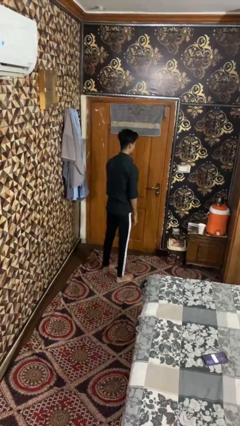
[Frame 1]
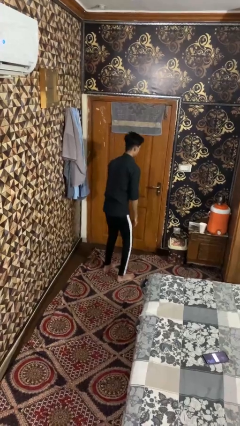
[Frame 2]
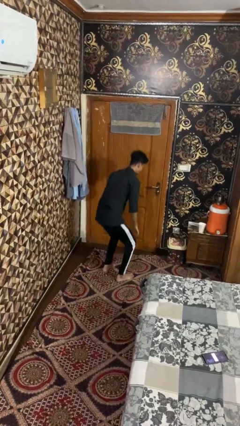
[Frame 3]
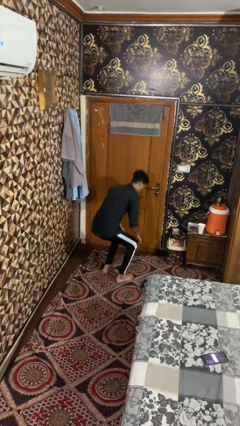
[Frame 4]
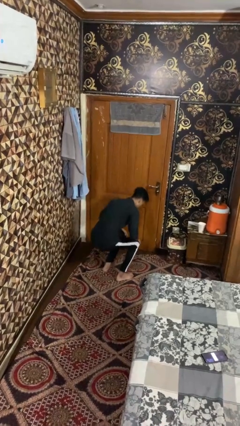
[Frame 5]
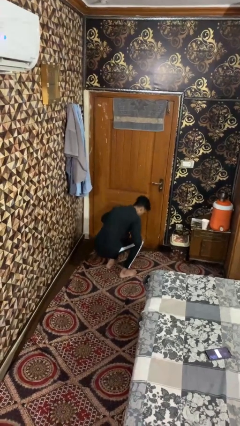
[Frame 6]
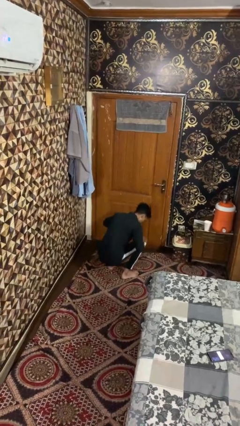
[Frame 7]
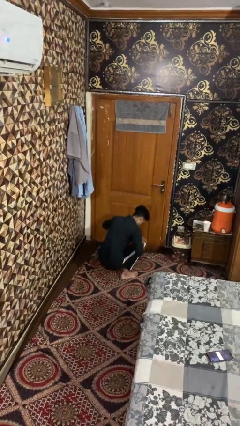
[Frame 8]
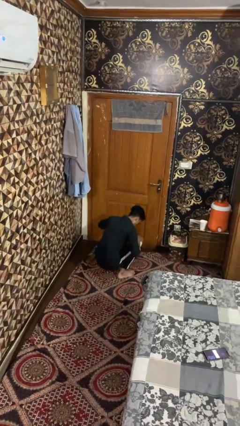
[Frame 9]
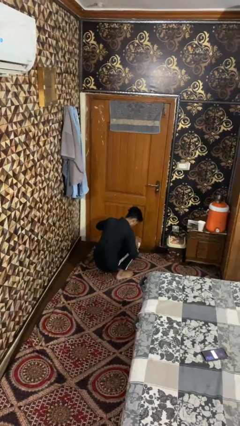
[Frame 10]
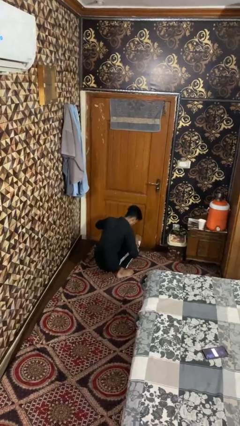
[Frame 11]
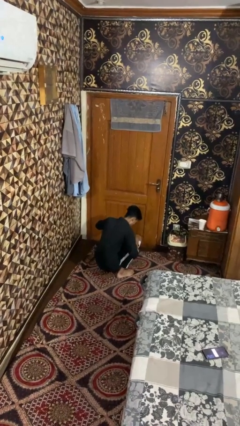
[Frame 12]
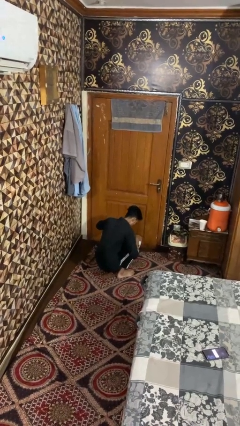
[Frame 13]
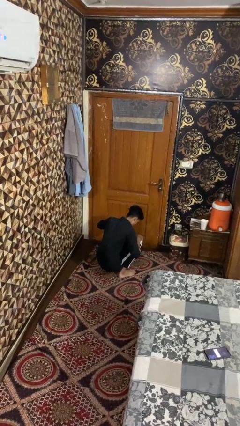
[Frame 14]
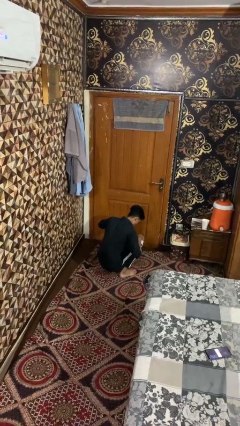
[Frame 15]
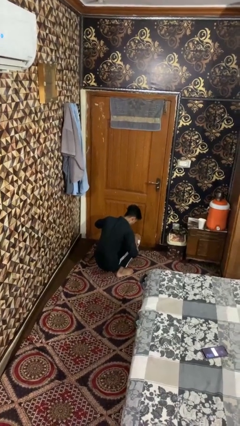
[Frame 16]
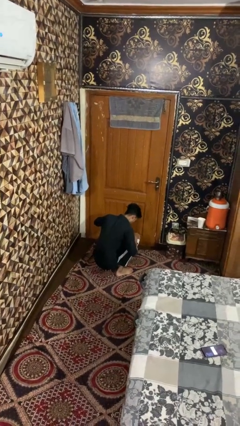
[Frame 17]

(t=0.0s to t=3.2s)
person exercises with situp

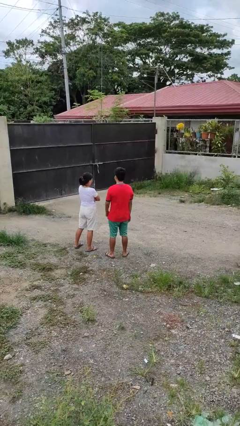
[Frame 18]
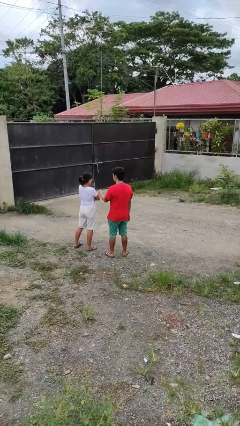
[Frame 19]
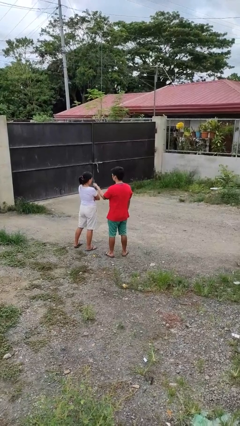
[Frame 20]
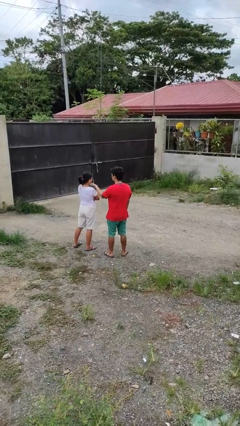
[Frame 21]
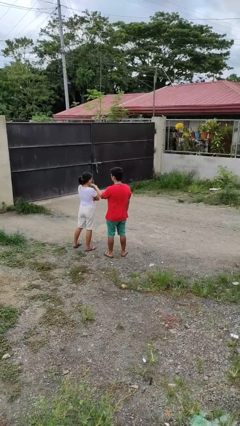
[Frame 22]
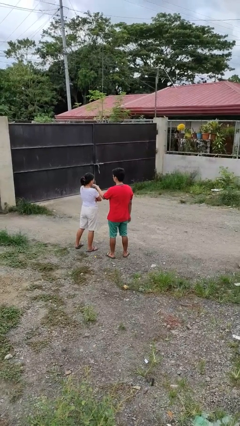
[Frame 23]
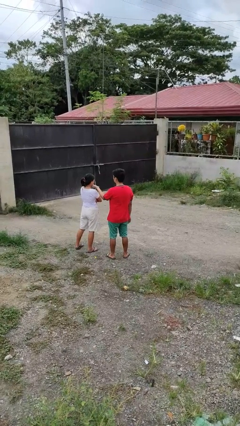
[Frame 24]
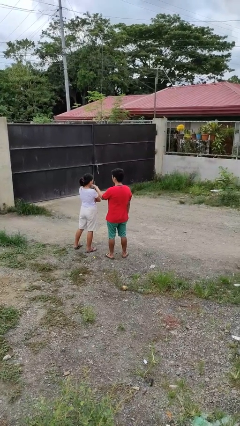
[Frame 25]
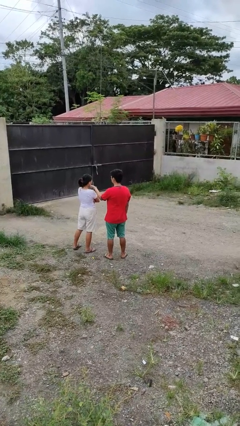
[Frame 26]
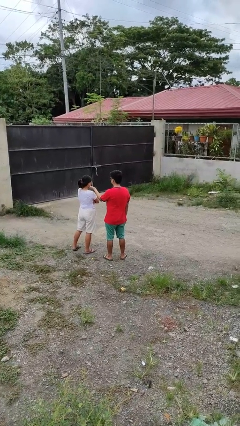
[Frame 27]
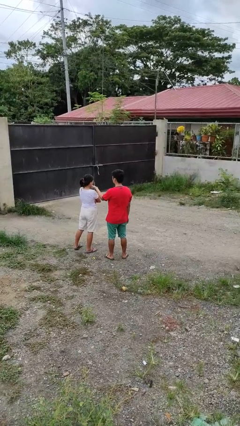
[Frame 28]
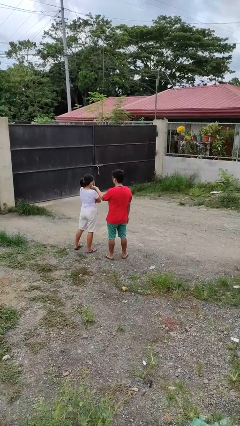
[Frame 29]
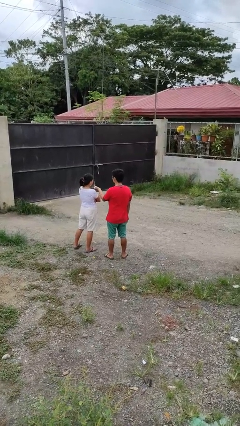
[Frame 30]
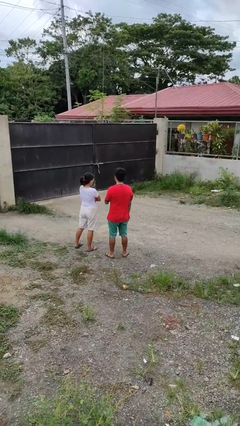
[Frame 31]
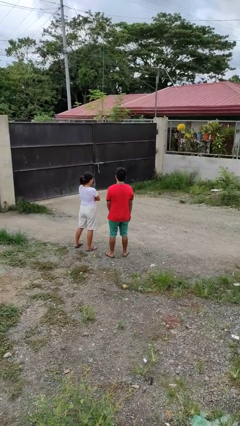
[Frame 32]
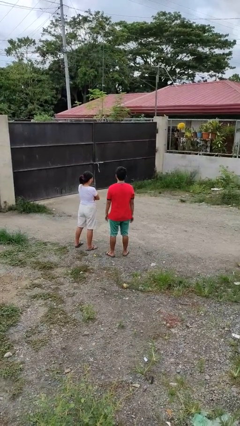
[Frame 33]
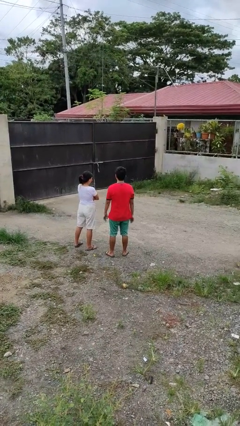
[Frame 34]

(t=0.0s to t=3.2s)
person touches face of person

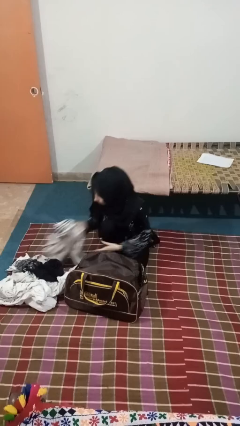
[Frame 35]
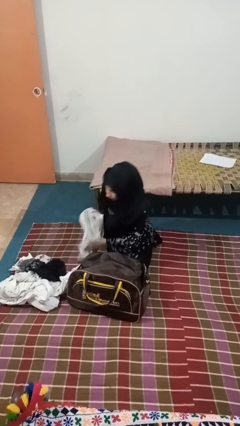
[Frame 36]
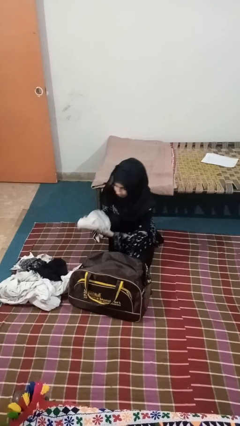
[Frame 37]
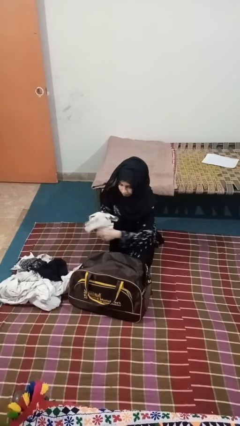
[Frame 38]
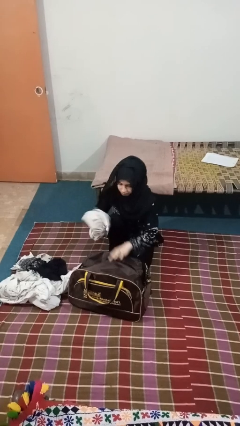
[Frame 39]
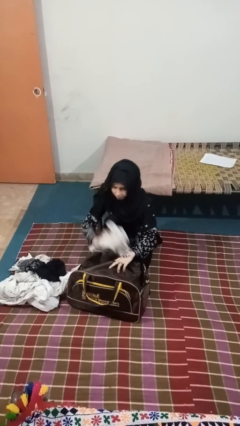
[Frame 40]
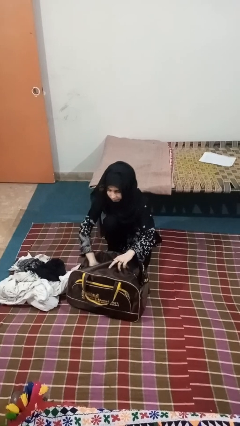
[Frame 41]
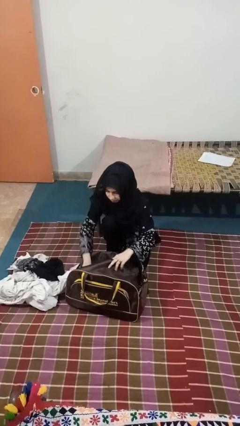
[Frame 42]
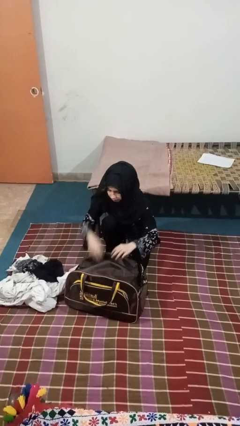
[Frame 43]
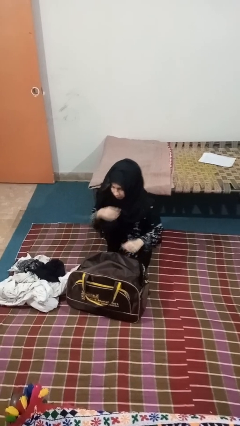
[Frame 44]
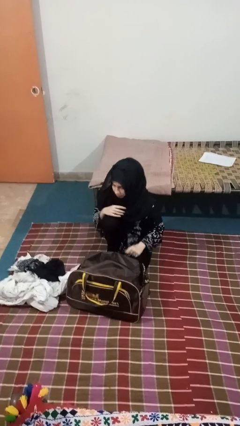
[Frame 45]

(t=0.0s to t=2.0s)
person loads clothes into suitcase

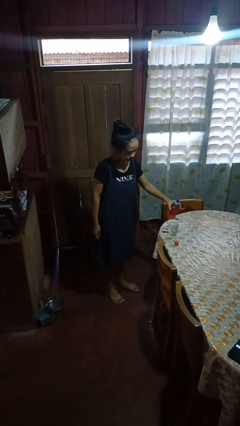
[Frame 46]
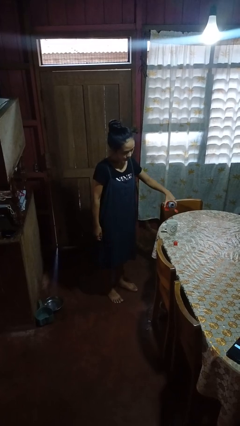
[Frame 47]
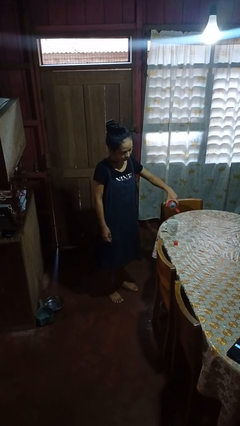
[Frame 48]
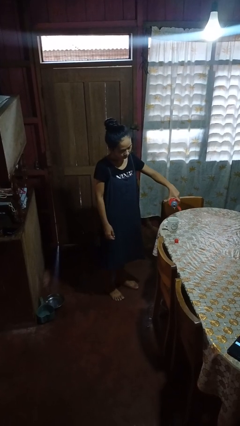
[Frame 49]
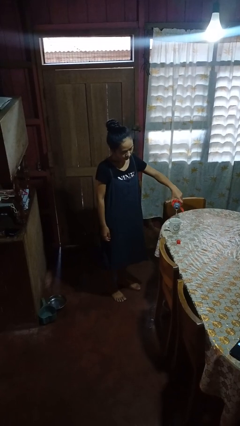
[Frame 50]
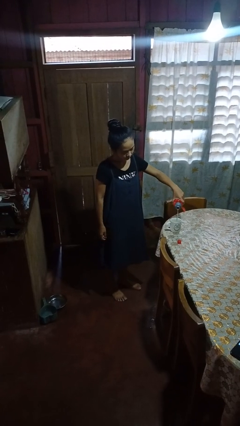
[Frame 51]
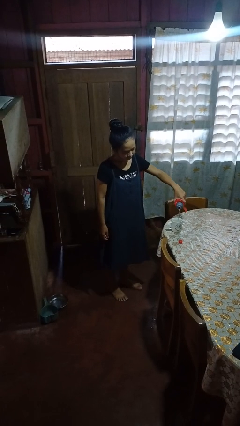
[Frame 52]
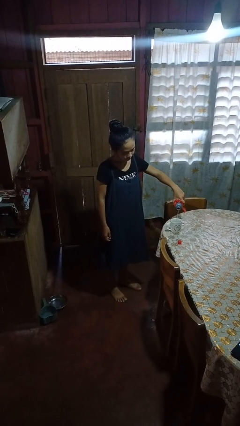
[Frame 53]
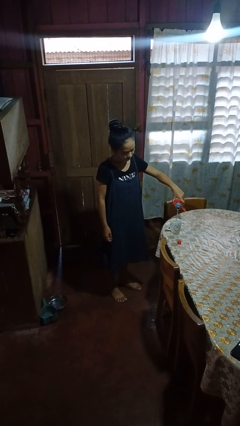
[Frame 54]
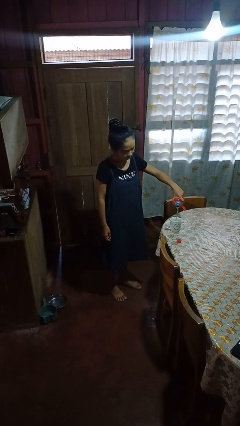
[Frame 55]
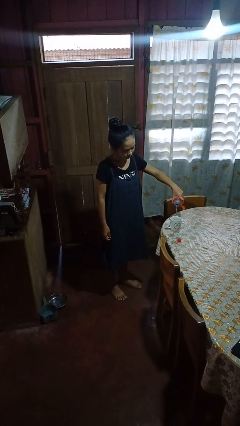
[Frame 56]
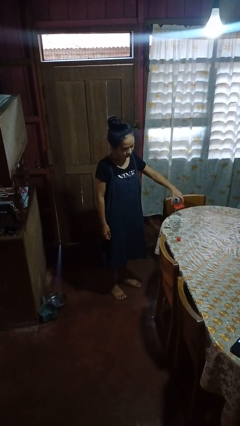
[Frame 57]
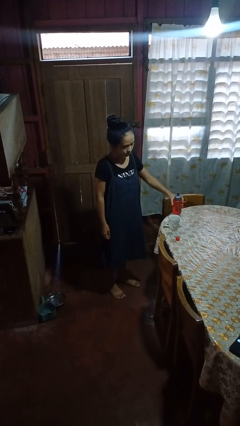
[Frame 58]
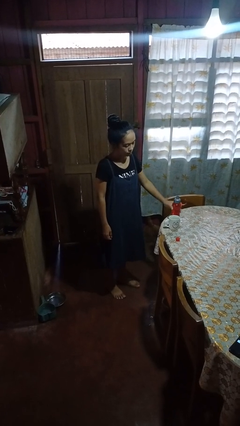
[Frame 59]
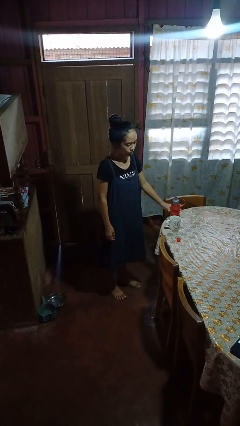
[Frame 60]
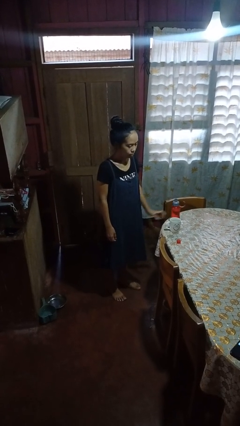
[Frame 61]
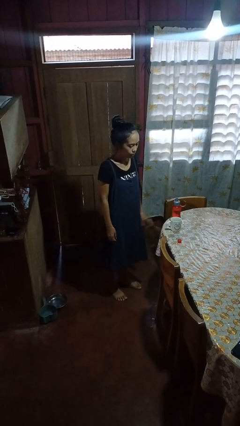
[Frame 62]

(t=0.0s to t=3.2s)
person pours liquid into cup

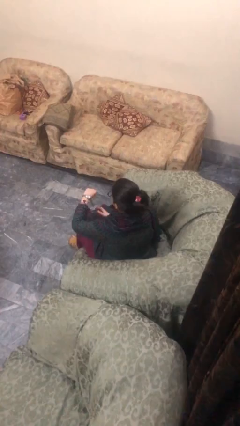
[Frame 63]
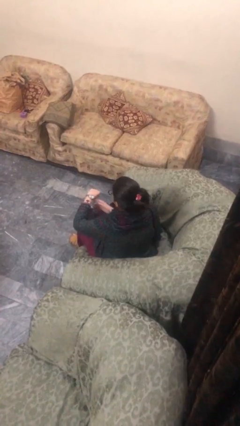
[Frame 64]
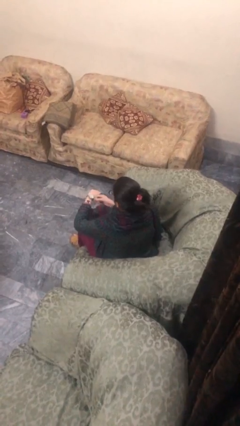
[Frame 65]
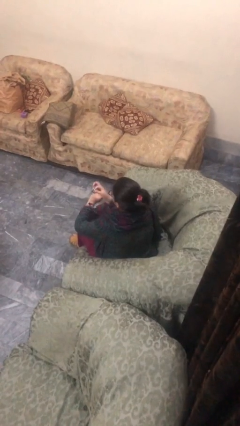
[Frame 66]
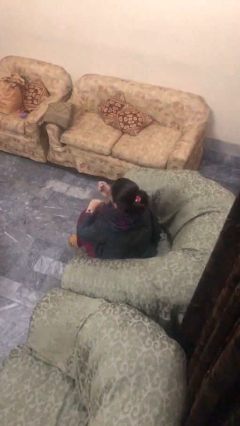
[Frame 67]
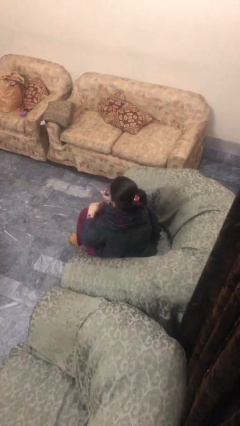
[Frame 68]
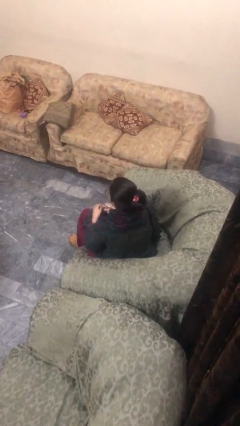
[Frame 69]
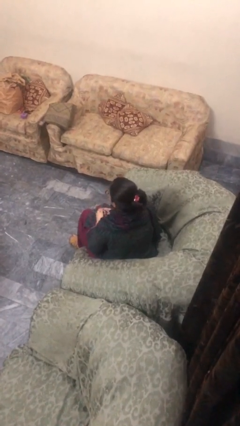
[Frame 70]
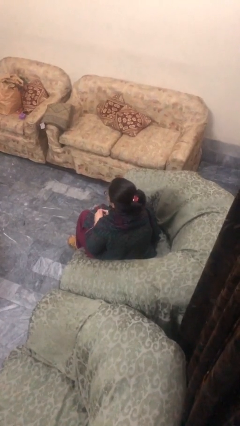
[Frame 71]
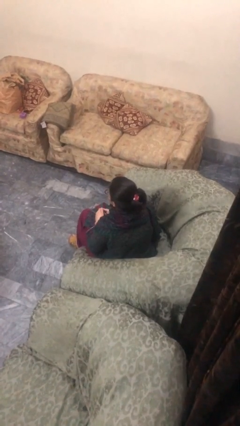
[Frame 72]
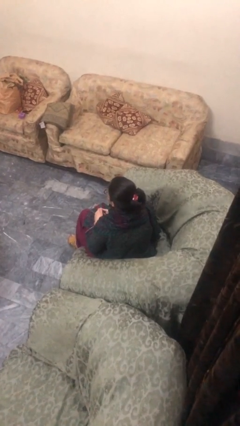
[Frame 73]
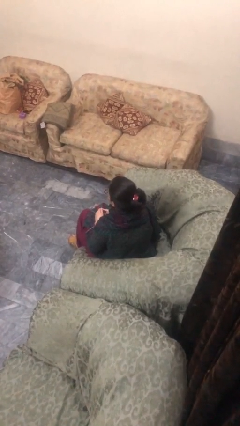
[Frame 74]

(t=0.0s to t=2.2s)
person takes off wristwatch

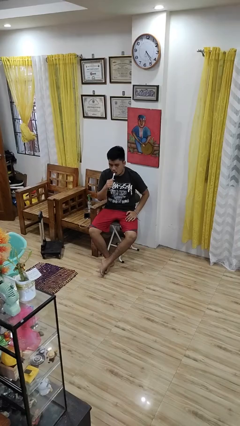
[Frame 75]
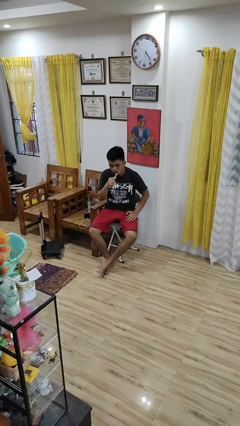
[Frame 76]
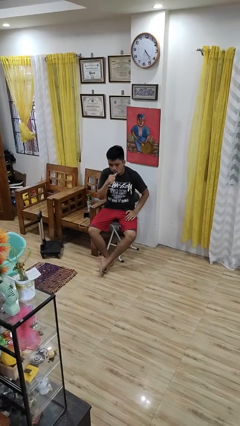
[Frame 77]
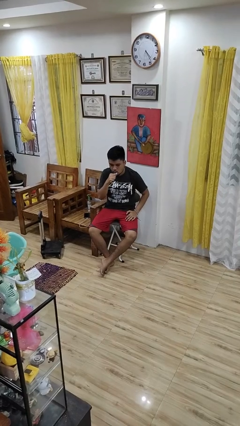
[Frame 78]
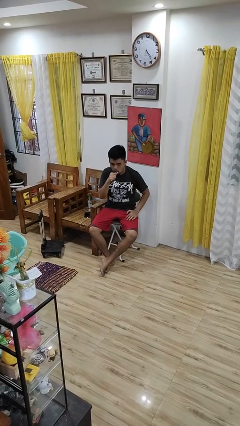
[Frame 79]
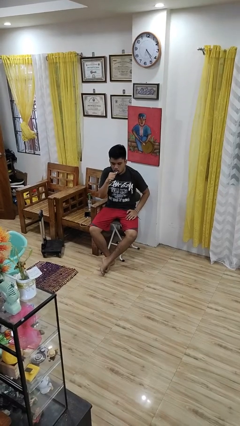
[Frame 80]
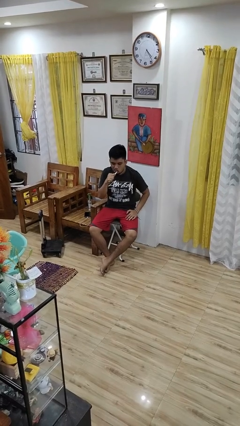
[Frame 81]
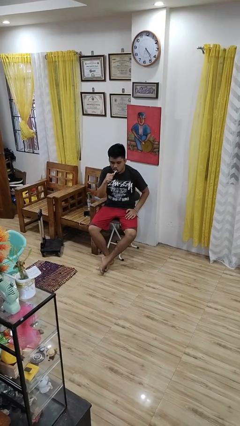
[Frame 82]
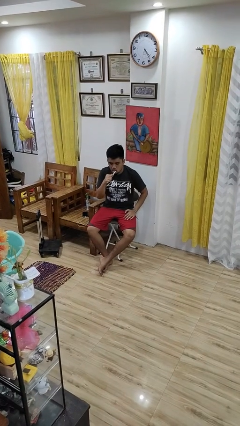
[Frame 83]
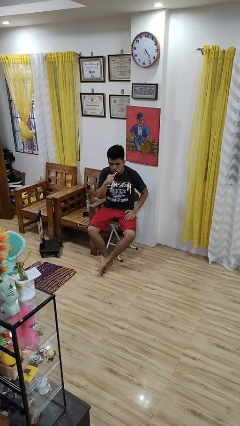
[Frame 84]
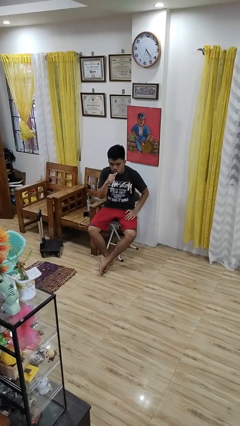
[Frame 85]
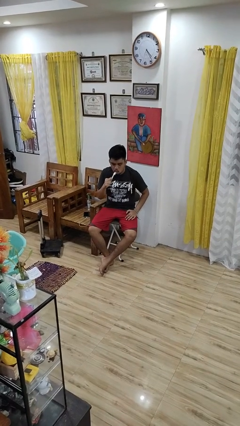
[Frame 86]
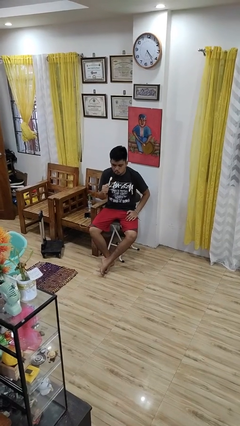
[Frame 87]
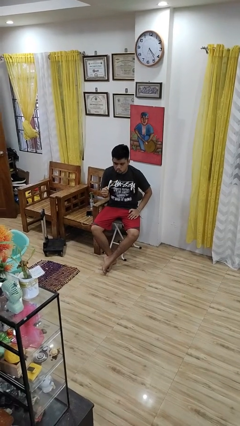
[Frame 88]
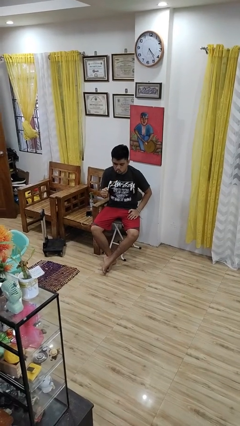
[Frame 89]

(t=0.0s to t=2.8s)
person brushes teeth

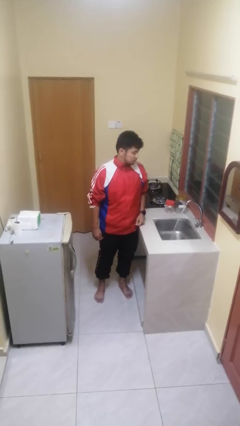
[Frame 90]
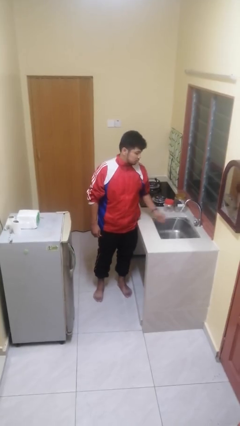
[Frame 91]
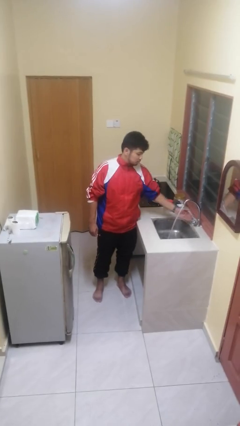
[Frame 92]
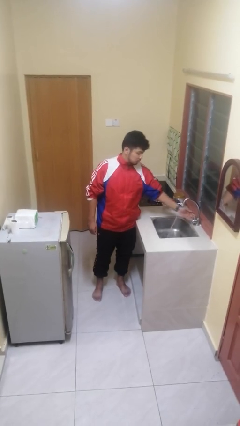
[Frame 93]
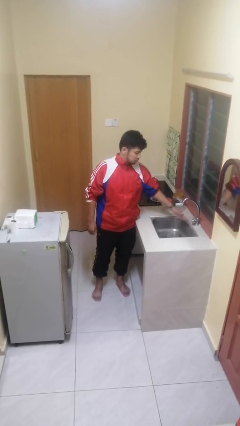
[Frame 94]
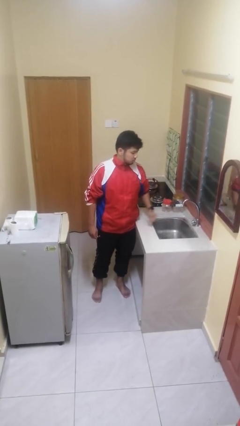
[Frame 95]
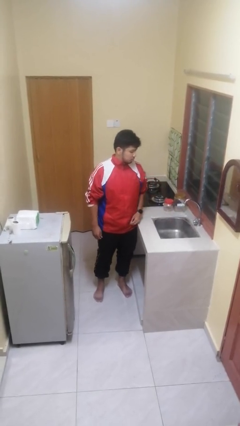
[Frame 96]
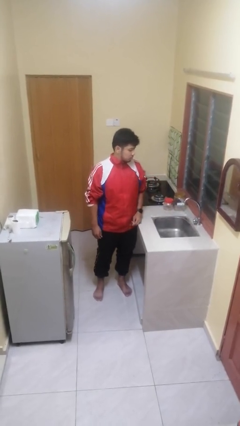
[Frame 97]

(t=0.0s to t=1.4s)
person turns off faucet
